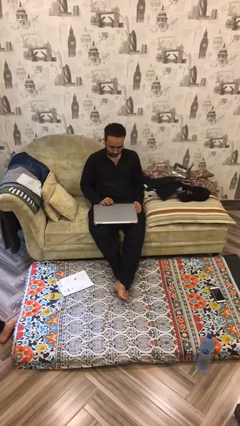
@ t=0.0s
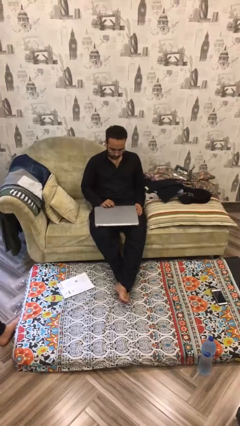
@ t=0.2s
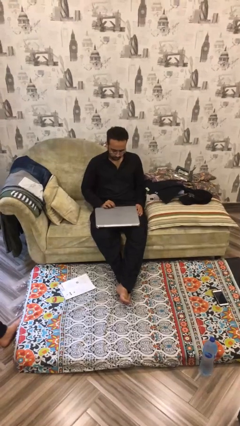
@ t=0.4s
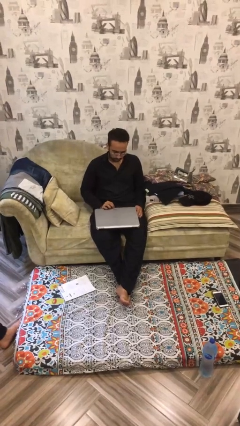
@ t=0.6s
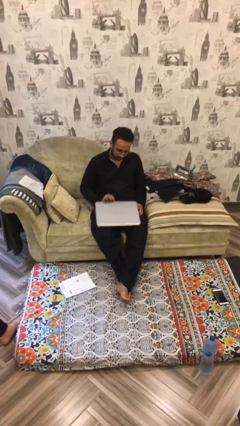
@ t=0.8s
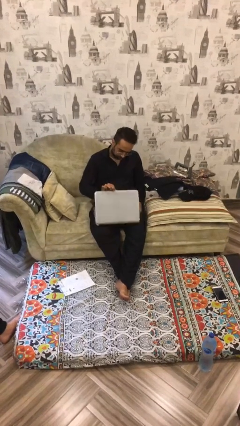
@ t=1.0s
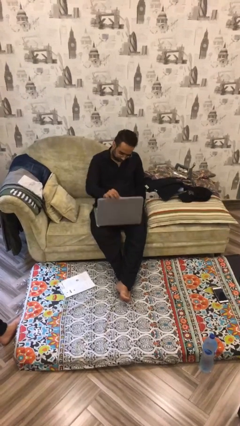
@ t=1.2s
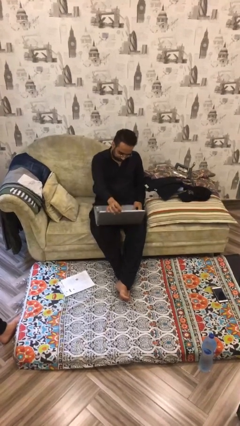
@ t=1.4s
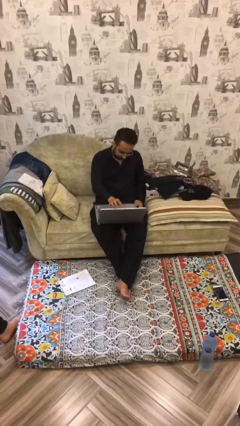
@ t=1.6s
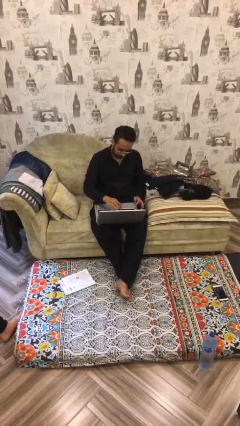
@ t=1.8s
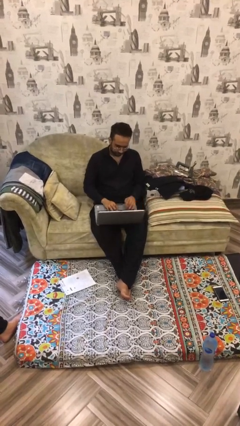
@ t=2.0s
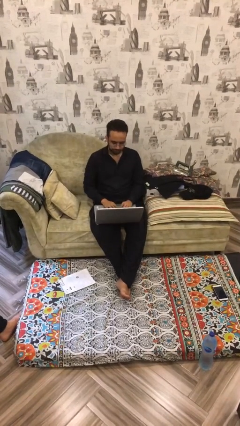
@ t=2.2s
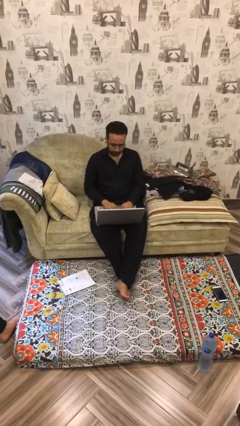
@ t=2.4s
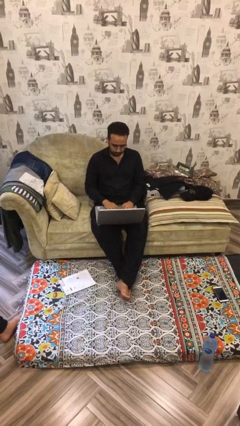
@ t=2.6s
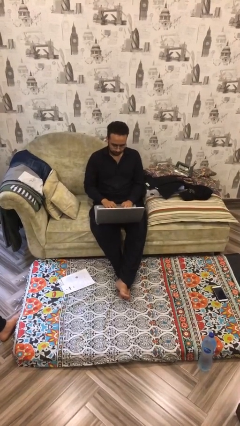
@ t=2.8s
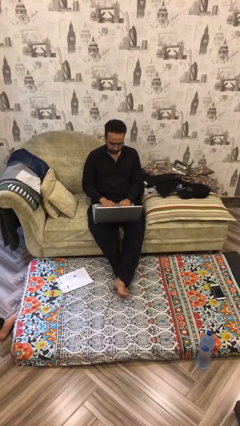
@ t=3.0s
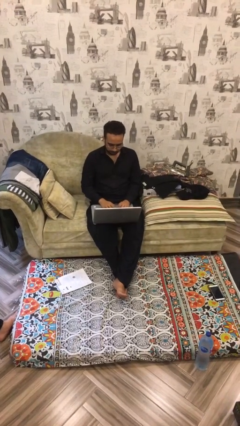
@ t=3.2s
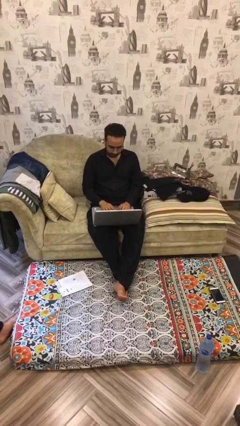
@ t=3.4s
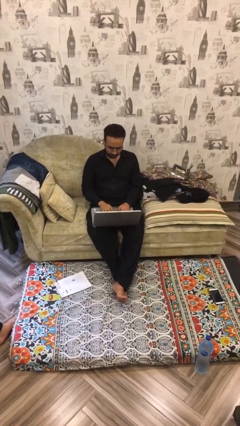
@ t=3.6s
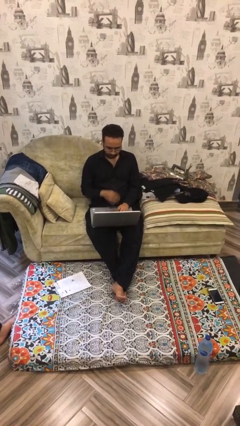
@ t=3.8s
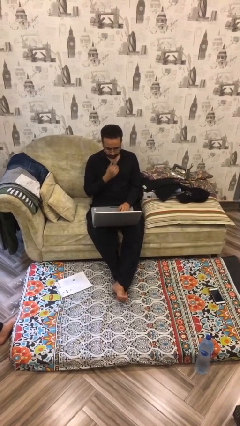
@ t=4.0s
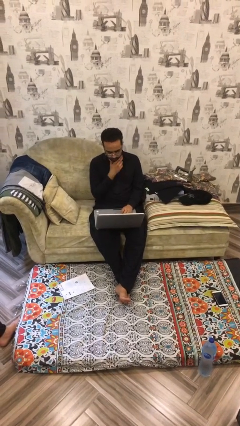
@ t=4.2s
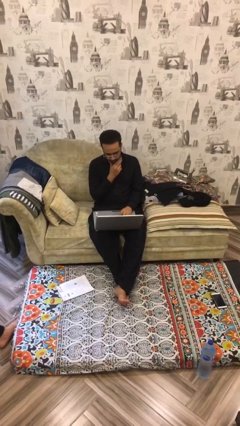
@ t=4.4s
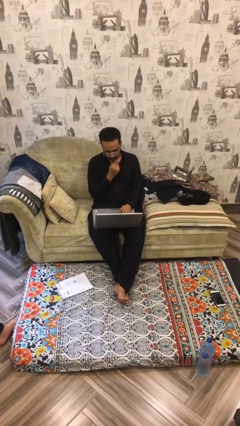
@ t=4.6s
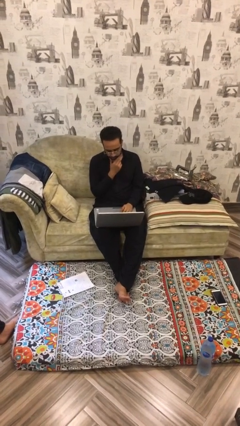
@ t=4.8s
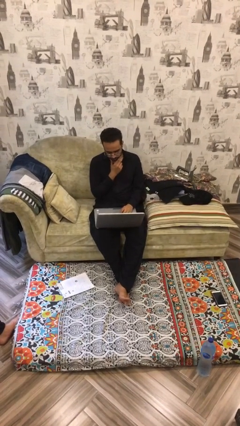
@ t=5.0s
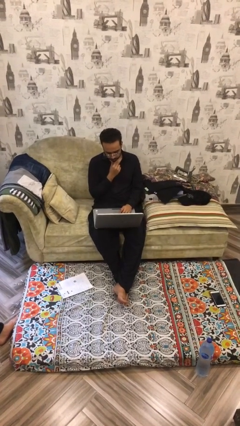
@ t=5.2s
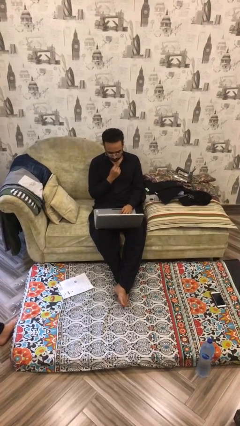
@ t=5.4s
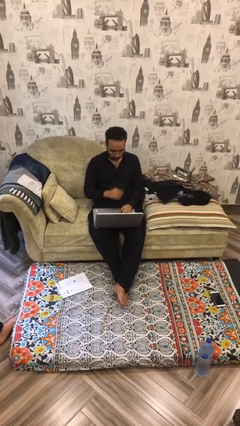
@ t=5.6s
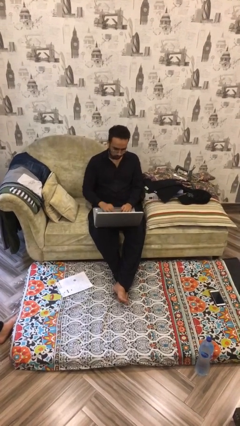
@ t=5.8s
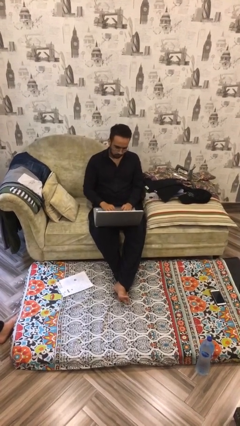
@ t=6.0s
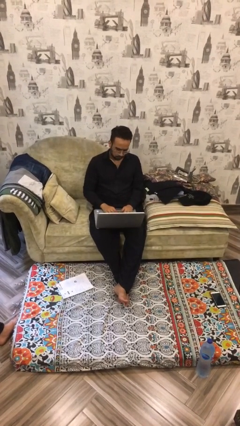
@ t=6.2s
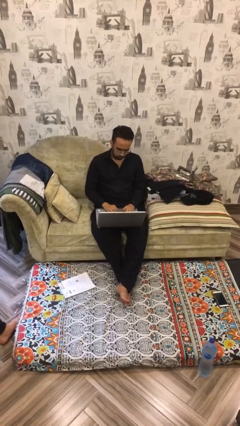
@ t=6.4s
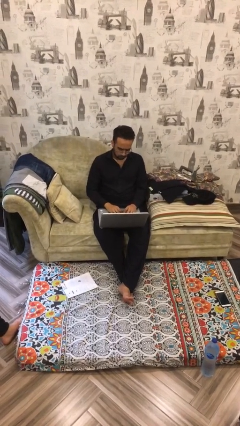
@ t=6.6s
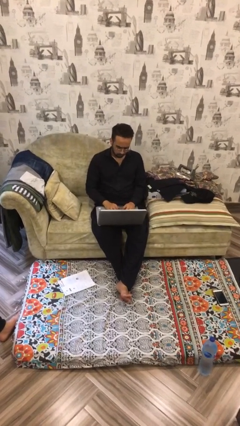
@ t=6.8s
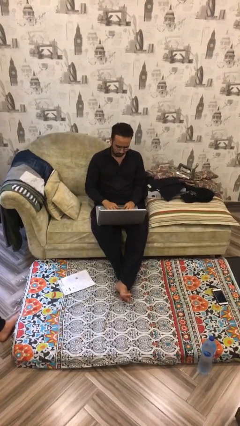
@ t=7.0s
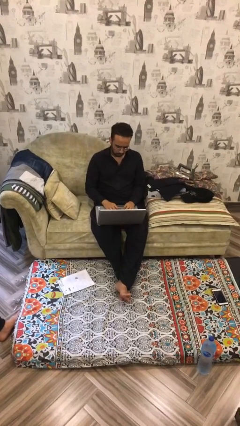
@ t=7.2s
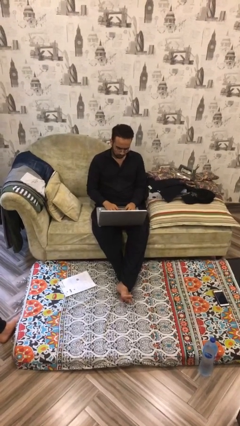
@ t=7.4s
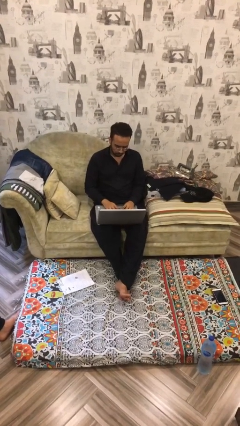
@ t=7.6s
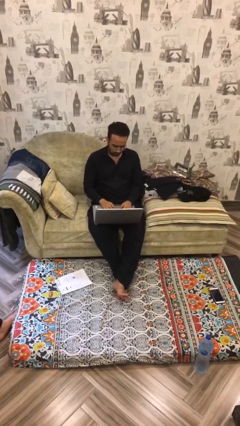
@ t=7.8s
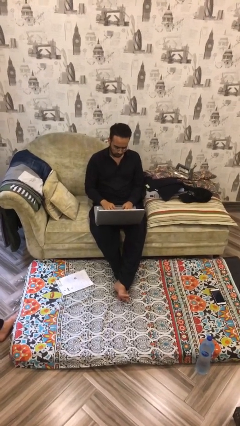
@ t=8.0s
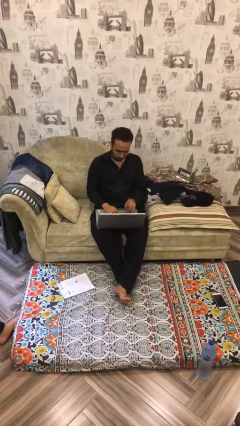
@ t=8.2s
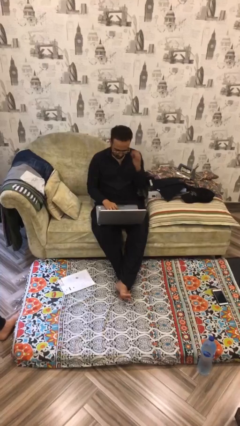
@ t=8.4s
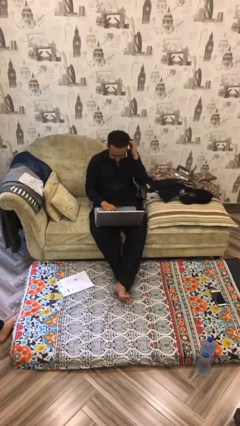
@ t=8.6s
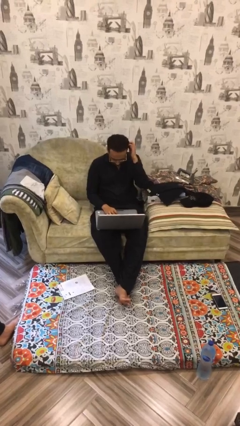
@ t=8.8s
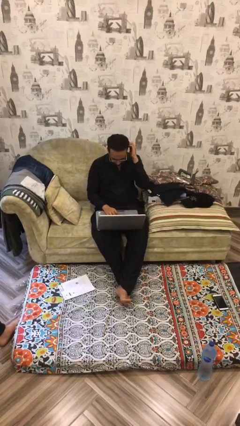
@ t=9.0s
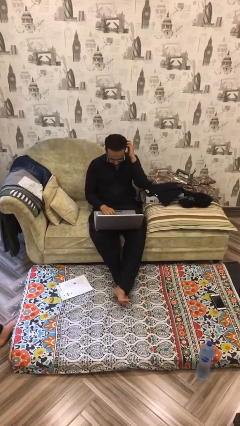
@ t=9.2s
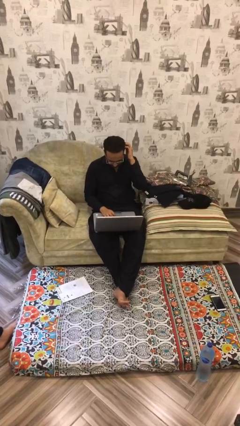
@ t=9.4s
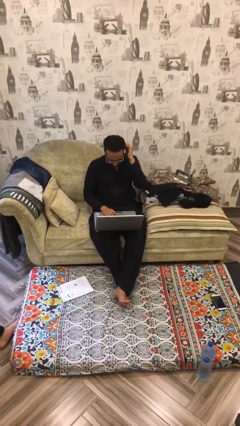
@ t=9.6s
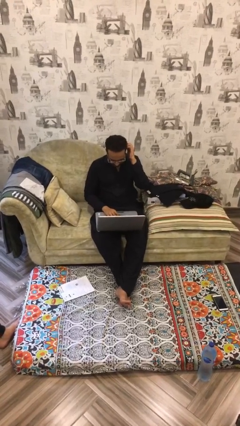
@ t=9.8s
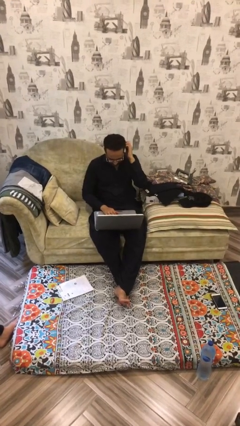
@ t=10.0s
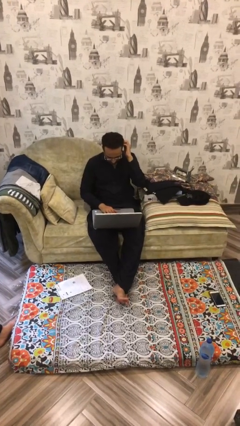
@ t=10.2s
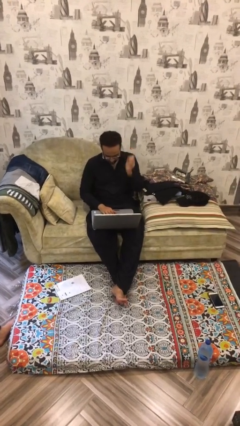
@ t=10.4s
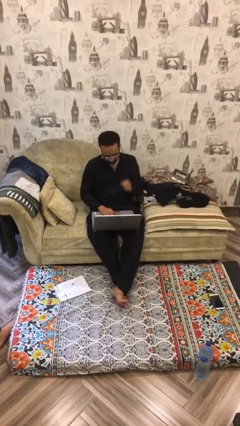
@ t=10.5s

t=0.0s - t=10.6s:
person interacts with laptop

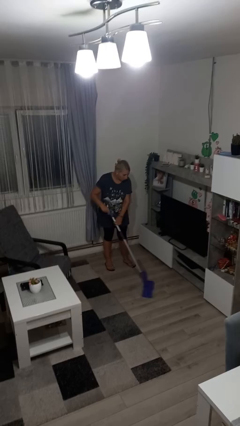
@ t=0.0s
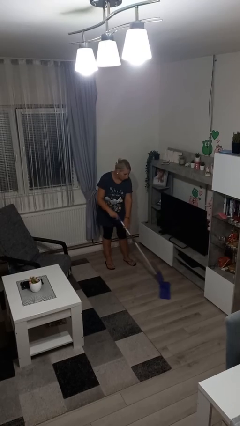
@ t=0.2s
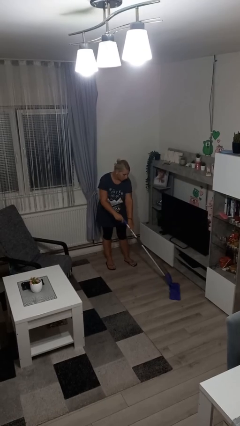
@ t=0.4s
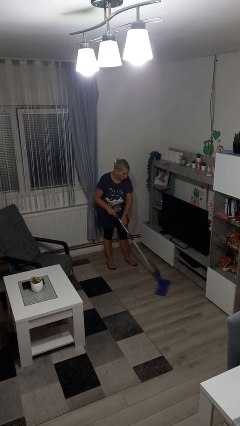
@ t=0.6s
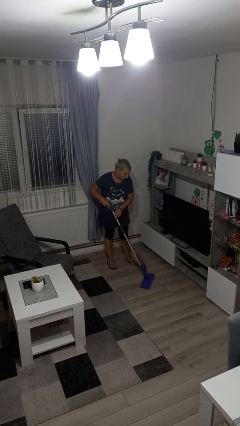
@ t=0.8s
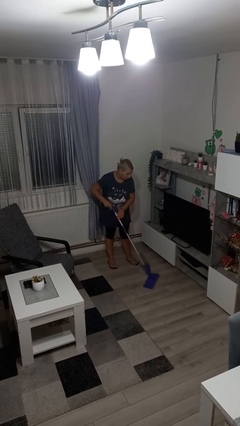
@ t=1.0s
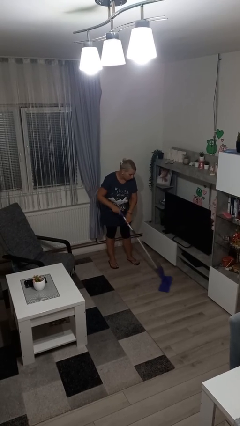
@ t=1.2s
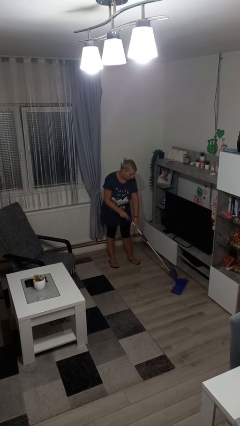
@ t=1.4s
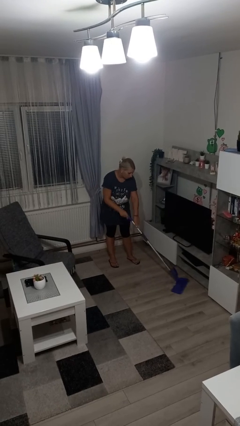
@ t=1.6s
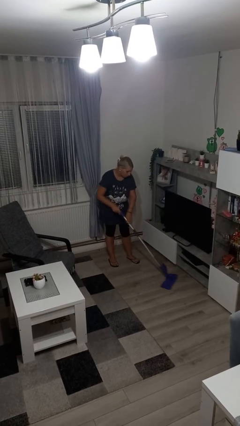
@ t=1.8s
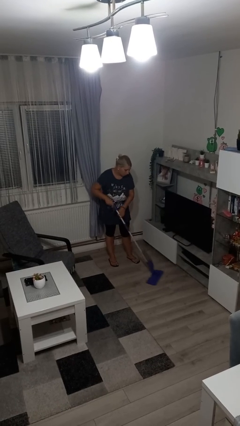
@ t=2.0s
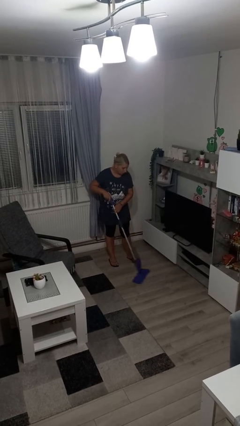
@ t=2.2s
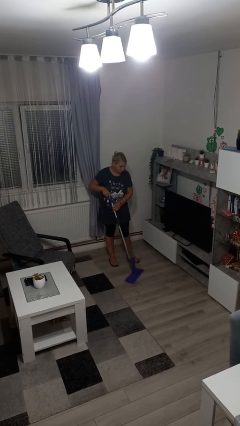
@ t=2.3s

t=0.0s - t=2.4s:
person mops

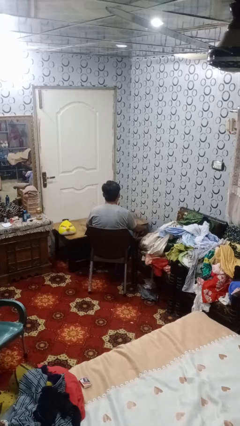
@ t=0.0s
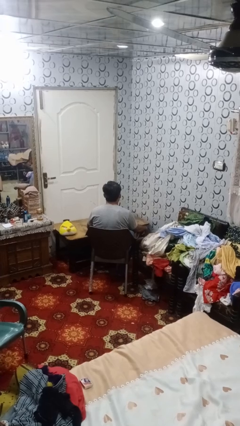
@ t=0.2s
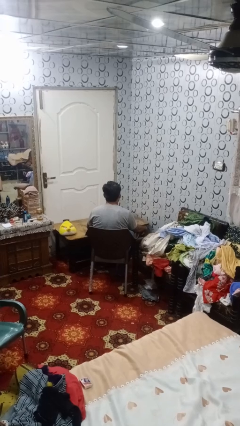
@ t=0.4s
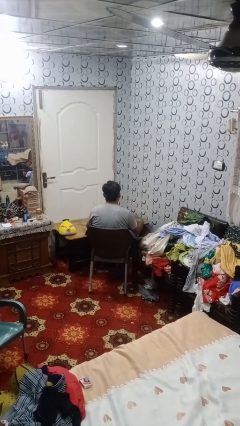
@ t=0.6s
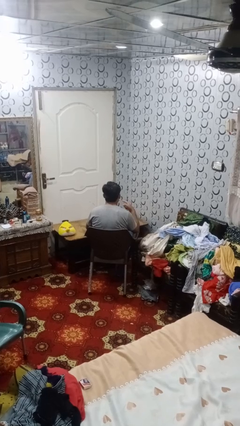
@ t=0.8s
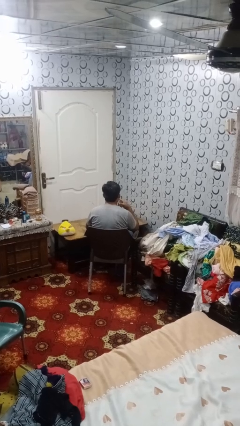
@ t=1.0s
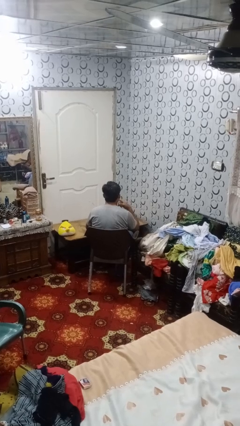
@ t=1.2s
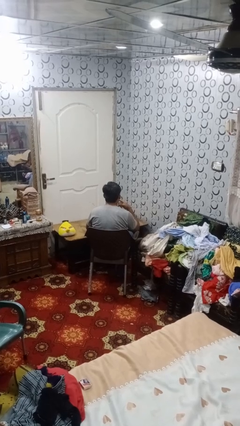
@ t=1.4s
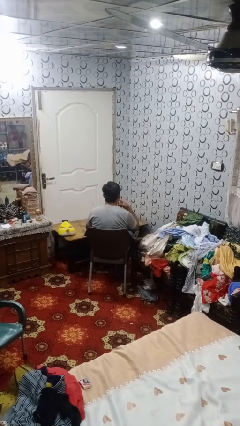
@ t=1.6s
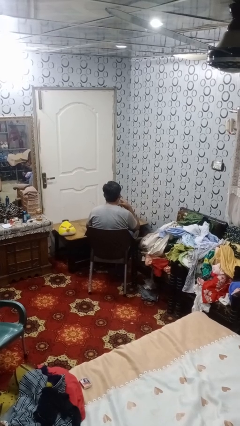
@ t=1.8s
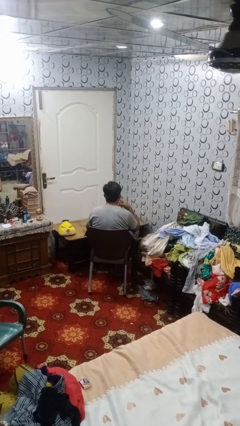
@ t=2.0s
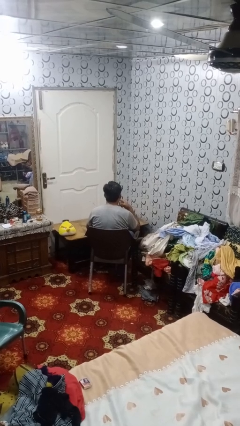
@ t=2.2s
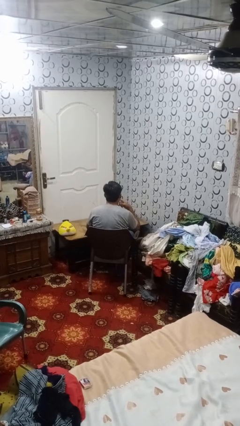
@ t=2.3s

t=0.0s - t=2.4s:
person licks fingers

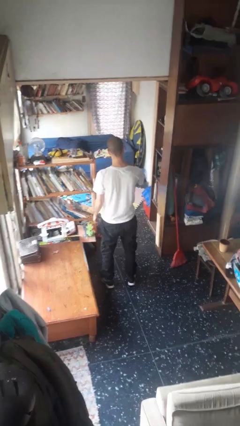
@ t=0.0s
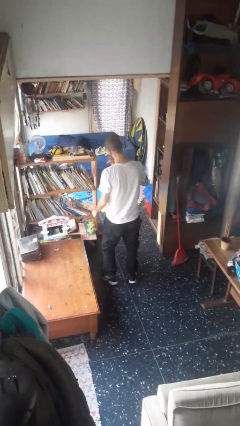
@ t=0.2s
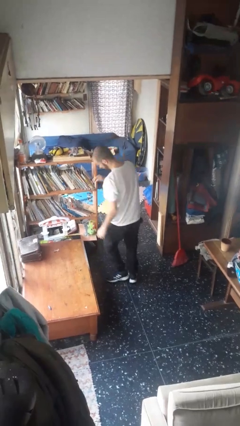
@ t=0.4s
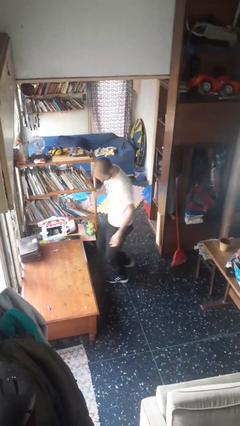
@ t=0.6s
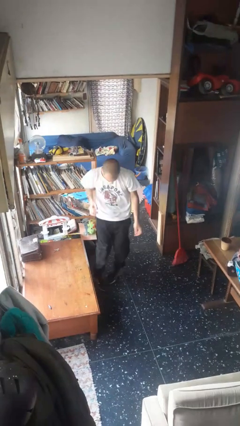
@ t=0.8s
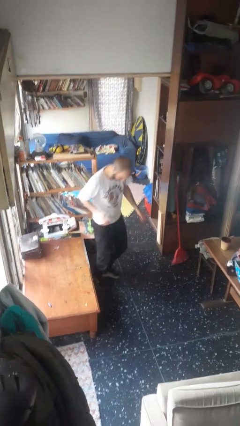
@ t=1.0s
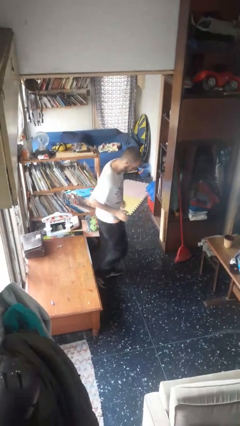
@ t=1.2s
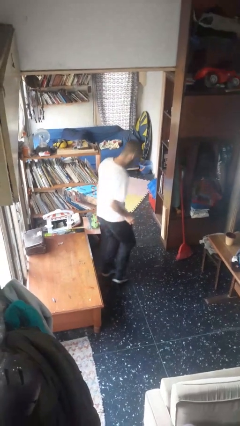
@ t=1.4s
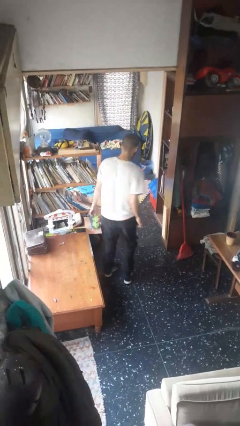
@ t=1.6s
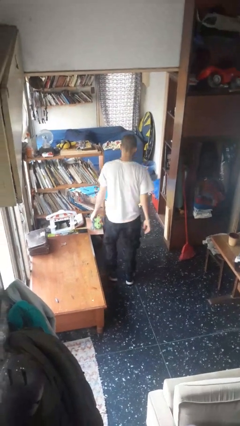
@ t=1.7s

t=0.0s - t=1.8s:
person twirls

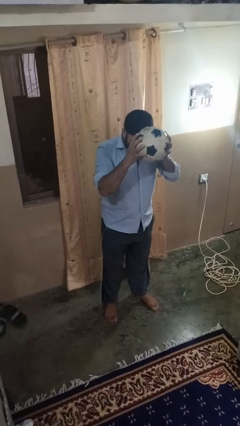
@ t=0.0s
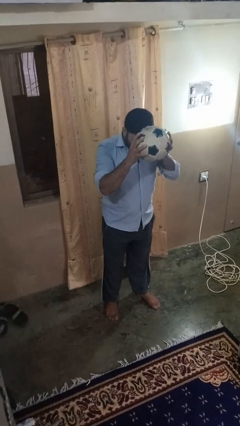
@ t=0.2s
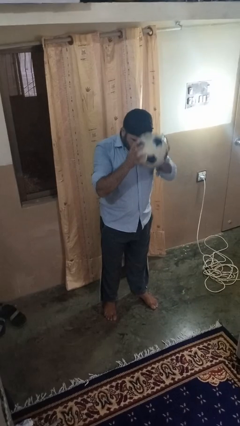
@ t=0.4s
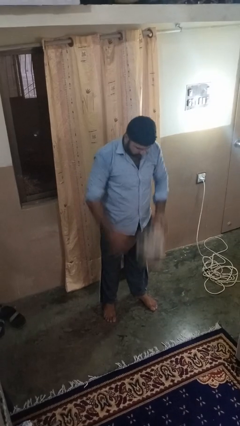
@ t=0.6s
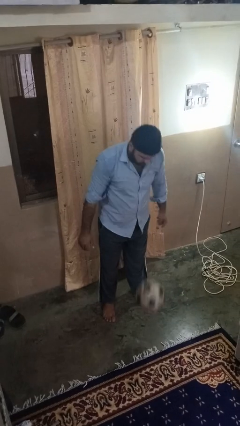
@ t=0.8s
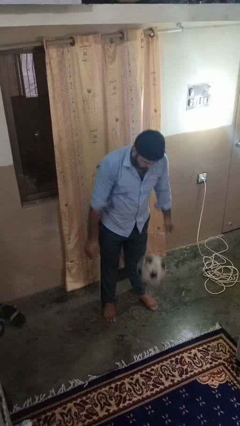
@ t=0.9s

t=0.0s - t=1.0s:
person bounces ball on floor
